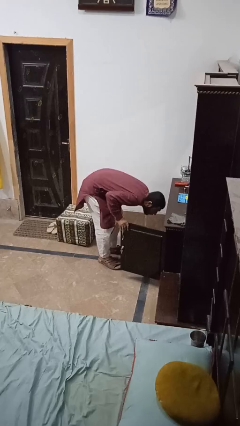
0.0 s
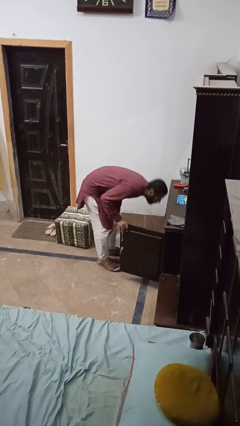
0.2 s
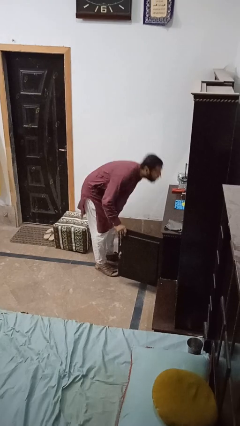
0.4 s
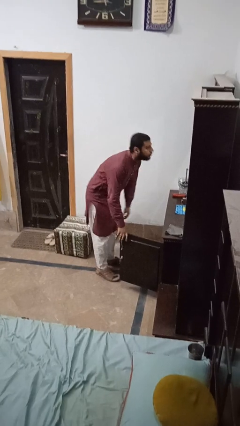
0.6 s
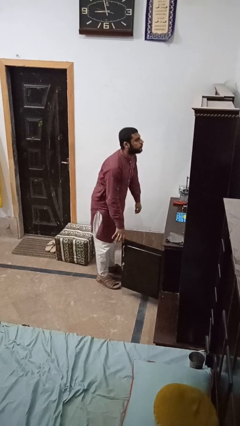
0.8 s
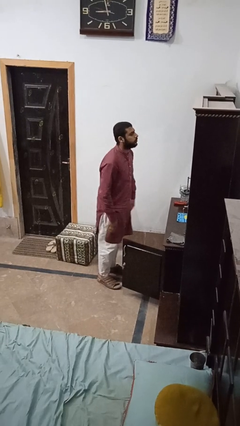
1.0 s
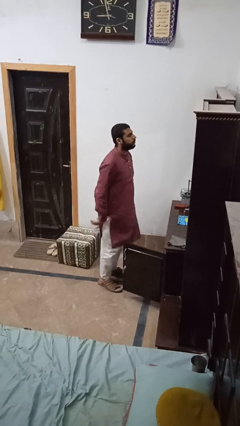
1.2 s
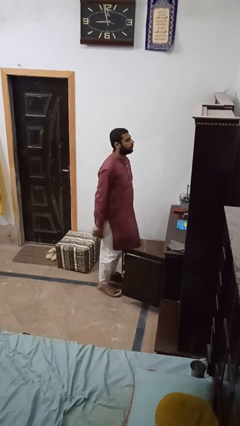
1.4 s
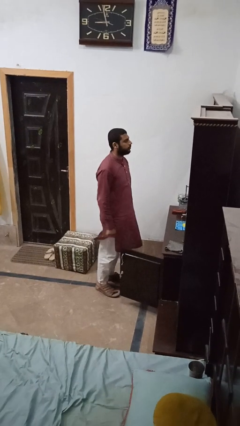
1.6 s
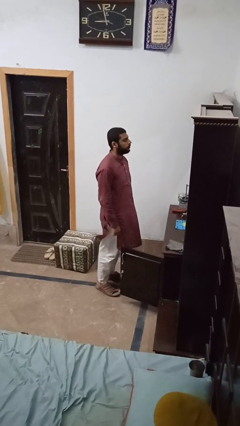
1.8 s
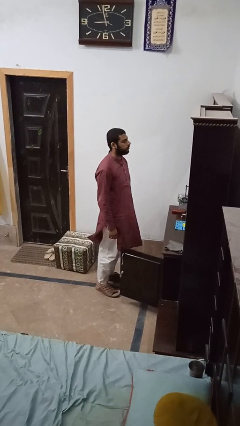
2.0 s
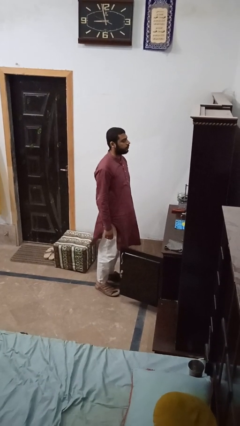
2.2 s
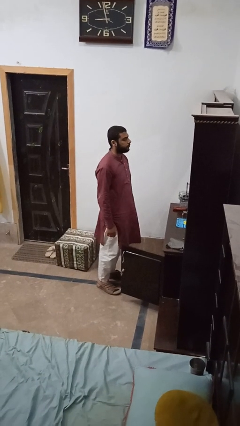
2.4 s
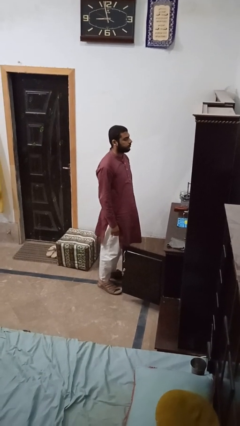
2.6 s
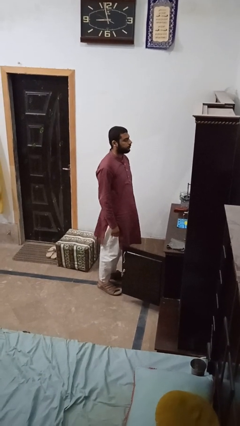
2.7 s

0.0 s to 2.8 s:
person searches in cabinet

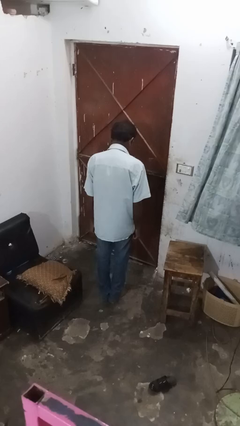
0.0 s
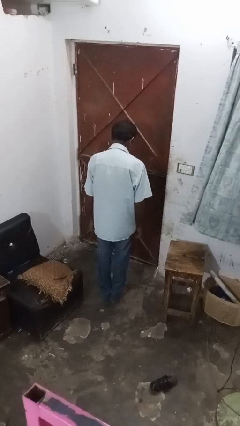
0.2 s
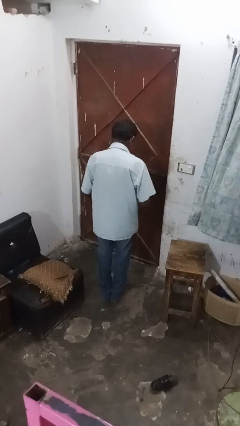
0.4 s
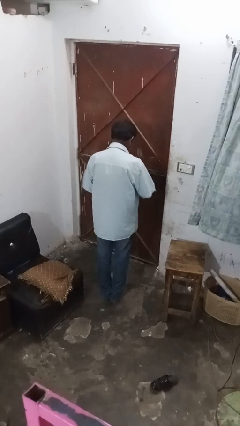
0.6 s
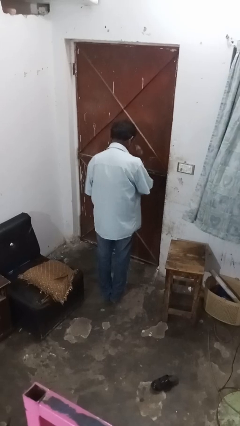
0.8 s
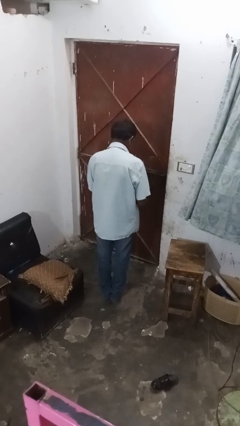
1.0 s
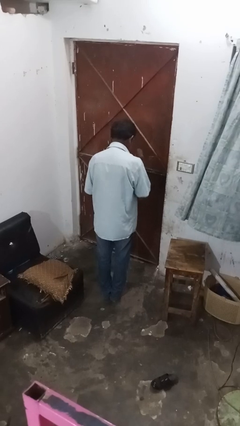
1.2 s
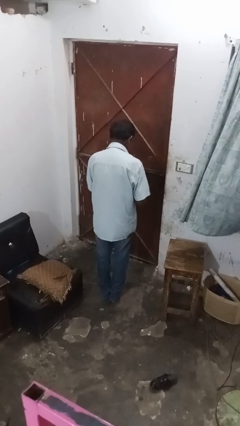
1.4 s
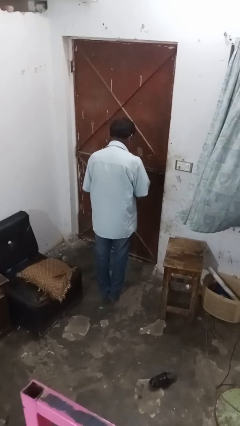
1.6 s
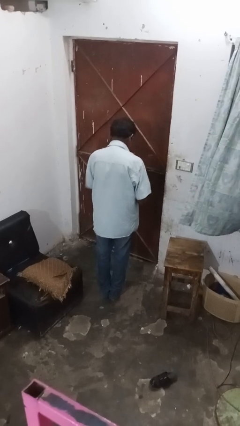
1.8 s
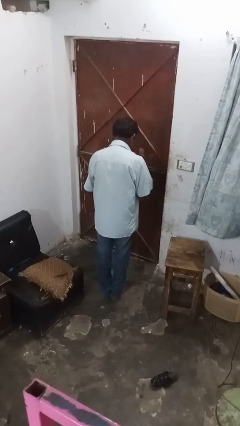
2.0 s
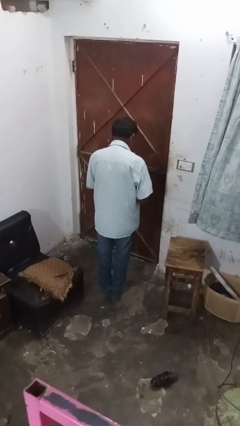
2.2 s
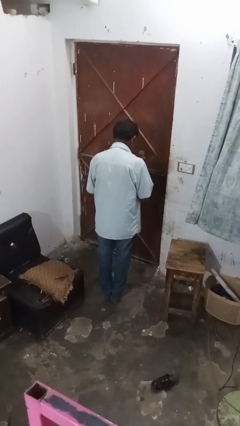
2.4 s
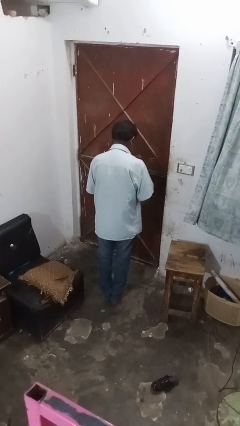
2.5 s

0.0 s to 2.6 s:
person drums on chest

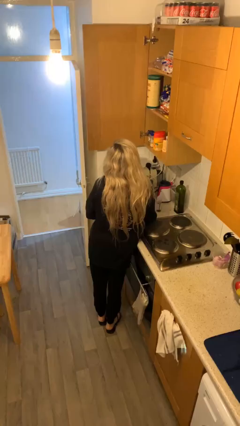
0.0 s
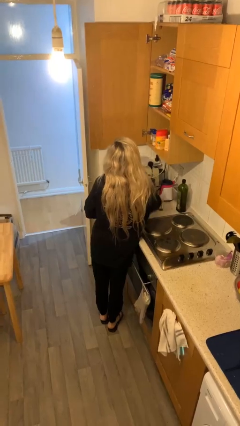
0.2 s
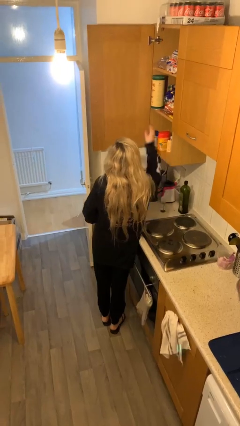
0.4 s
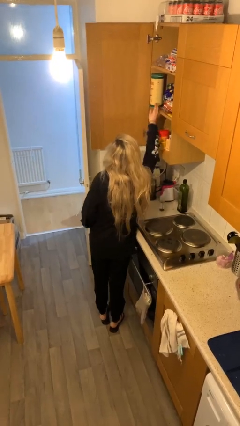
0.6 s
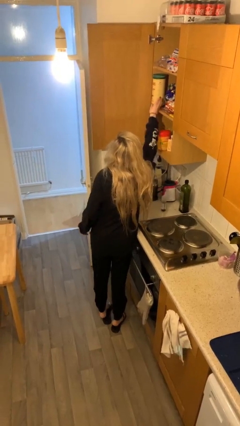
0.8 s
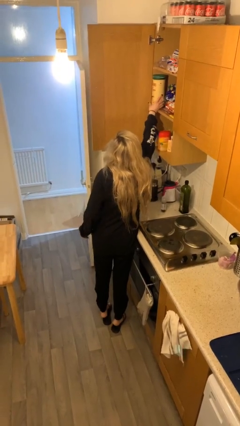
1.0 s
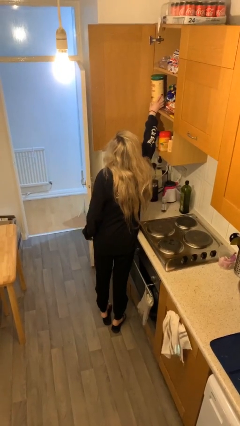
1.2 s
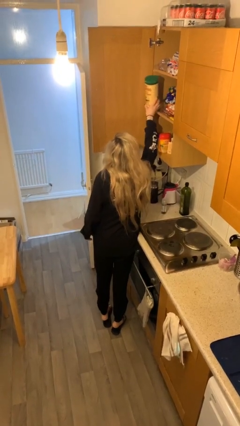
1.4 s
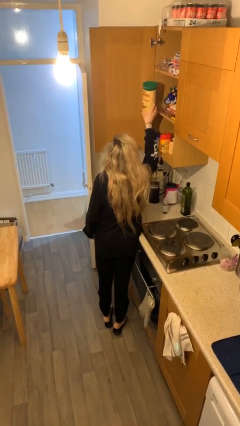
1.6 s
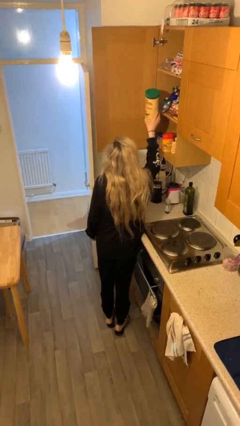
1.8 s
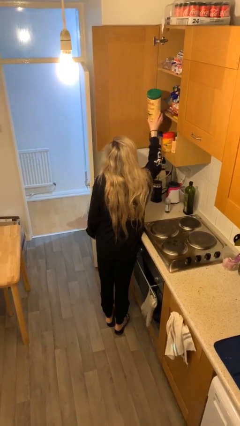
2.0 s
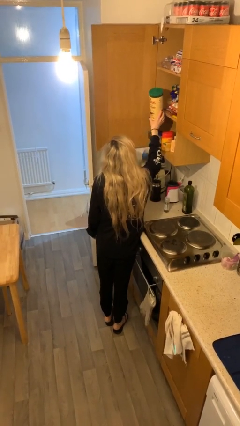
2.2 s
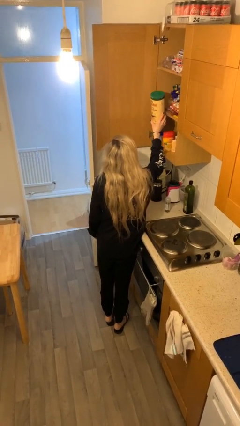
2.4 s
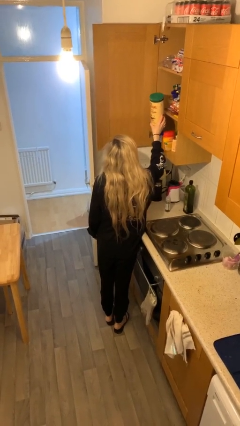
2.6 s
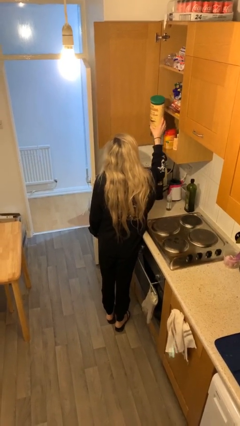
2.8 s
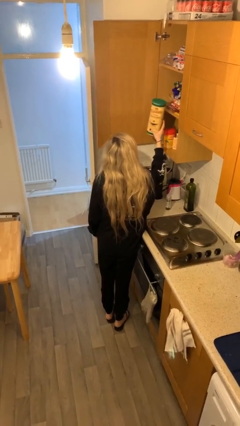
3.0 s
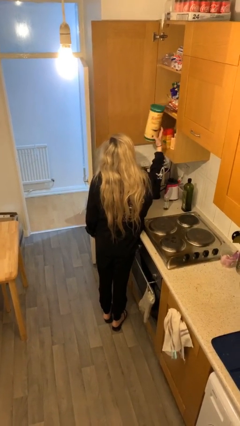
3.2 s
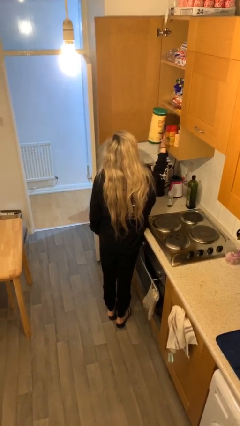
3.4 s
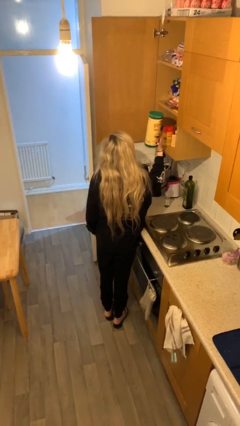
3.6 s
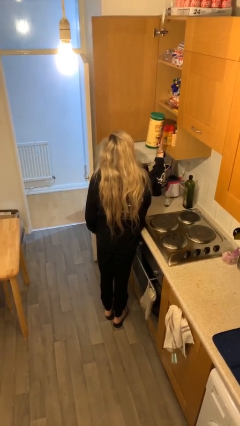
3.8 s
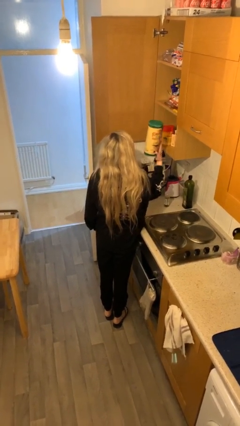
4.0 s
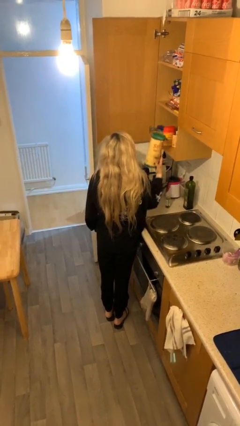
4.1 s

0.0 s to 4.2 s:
person picks up object from shelf

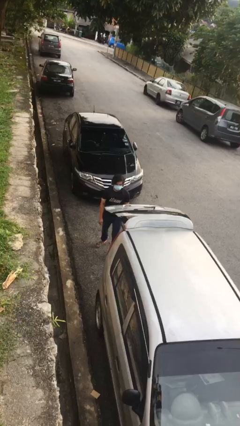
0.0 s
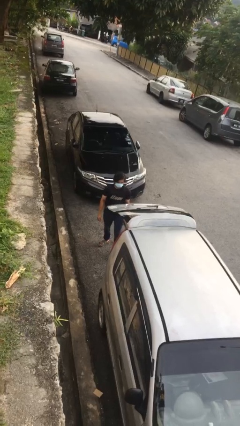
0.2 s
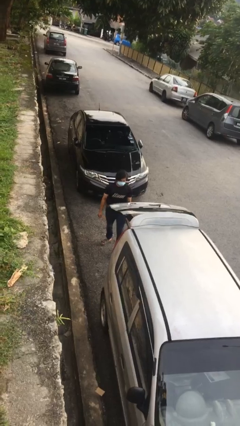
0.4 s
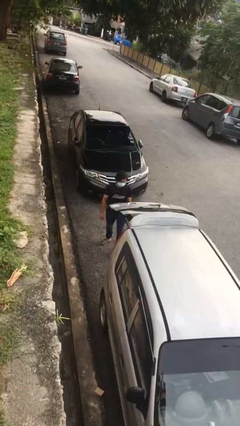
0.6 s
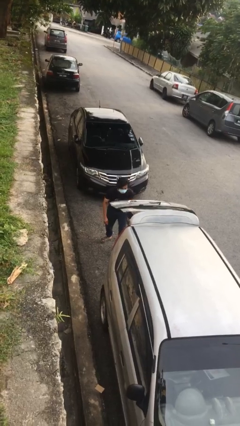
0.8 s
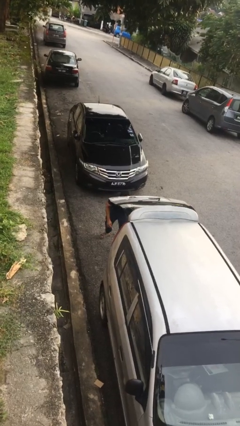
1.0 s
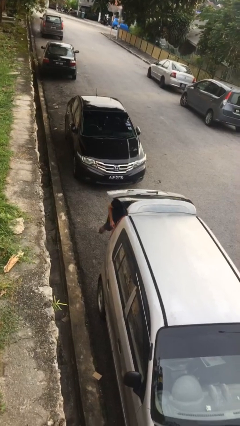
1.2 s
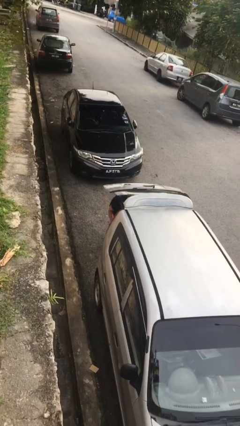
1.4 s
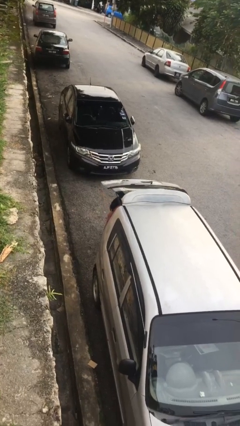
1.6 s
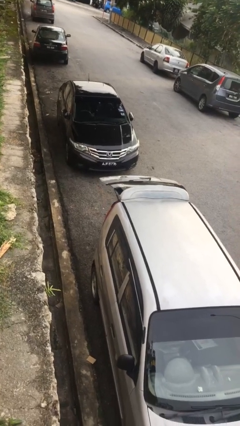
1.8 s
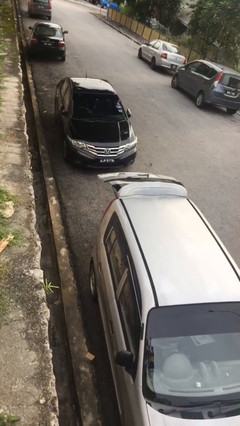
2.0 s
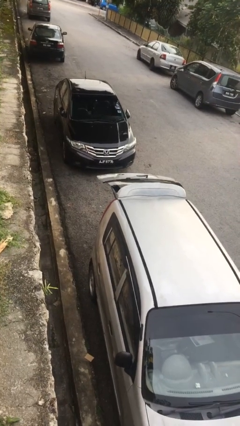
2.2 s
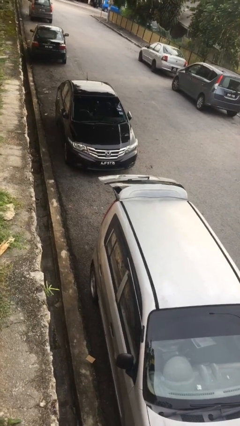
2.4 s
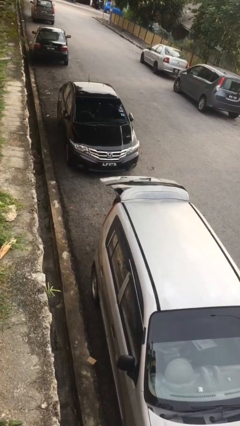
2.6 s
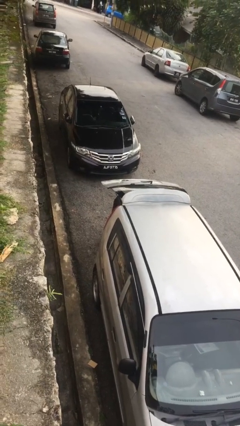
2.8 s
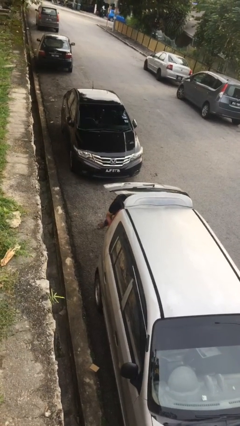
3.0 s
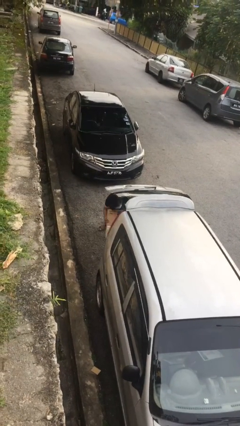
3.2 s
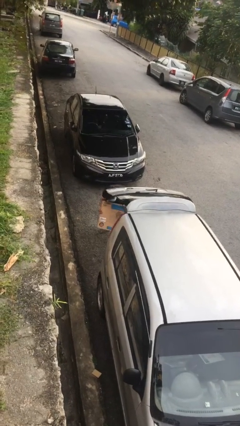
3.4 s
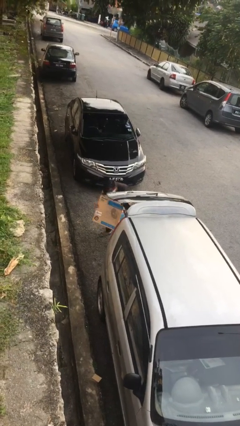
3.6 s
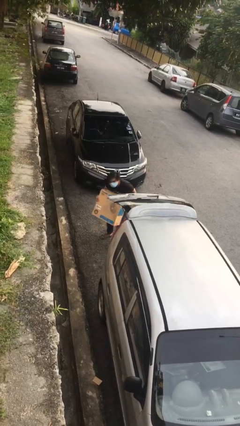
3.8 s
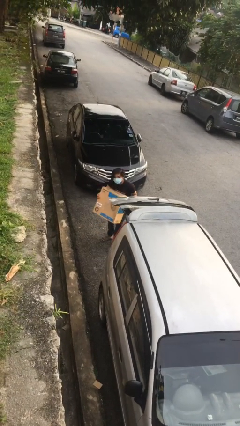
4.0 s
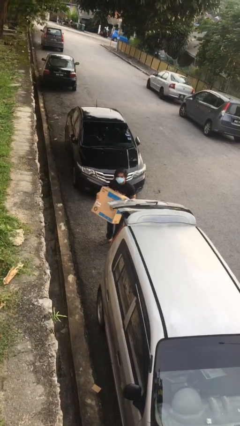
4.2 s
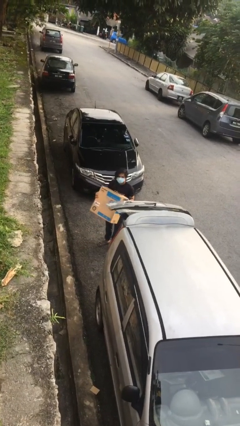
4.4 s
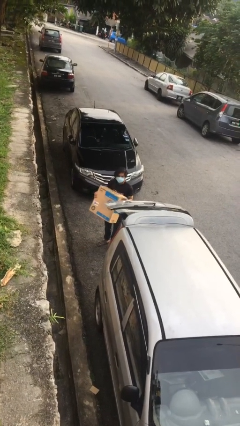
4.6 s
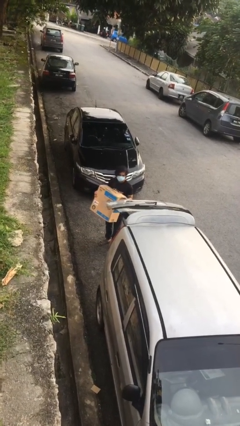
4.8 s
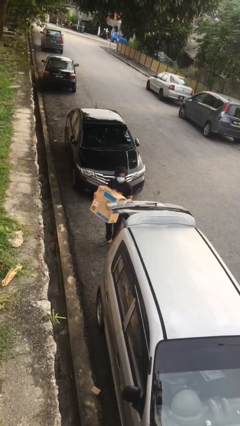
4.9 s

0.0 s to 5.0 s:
person unloads car

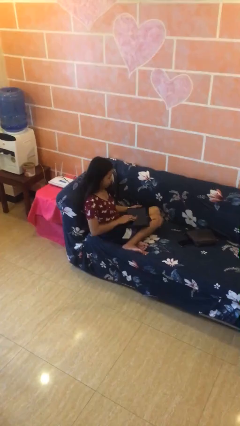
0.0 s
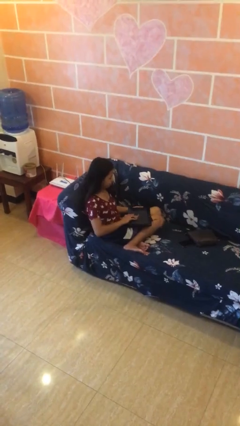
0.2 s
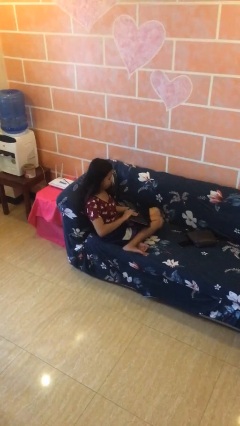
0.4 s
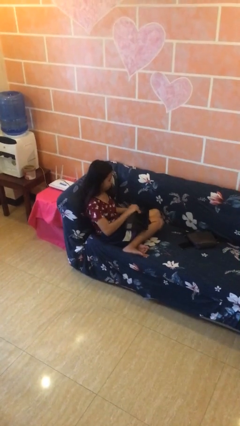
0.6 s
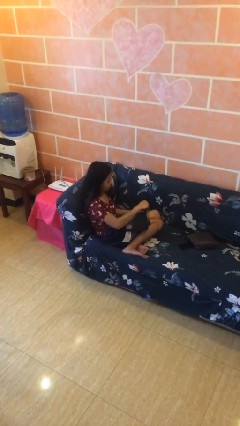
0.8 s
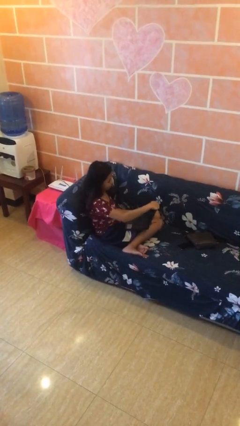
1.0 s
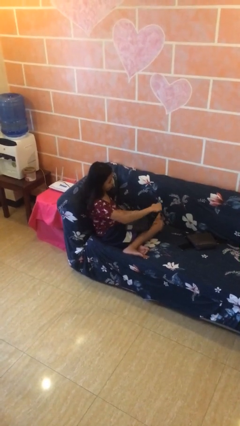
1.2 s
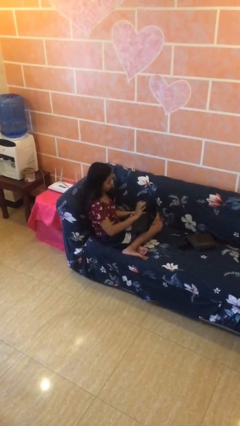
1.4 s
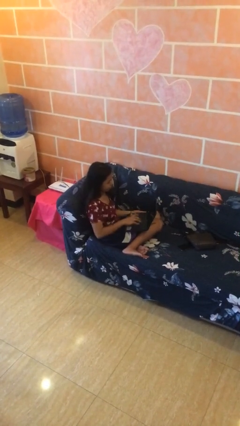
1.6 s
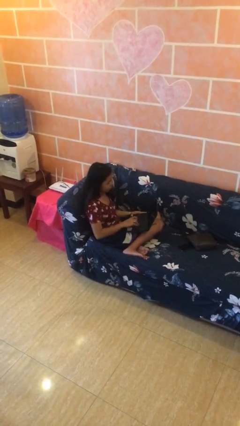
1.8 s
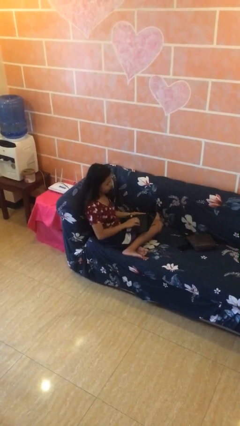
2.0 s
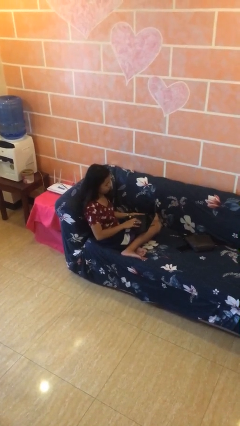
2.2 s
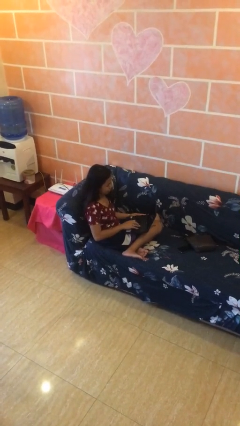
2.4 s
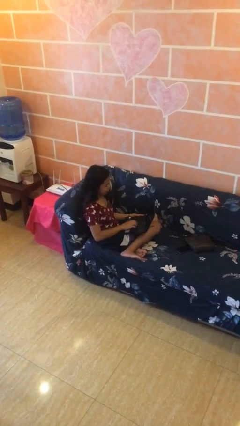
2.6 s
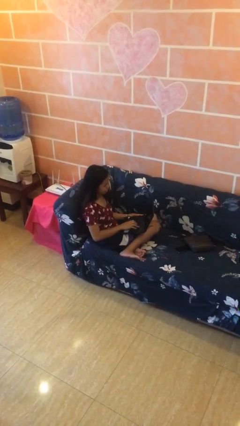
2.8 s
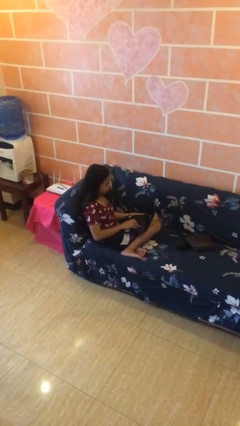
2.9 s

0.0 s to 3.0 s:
person interacts with laptop
